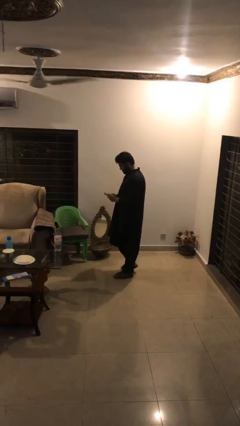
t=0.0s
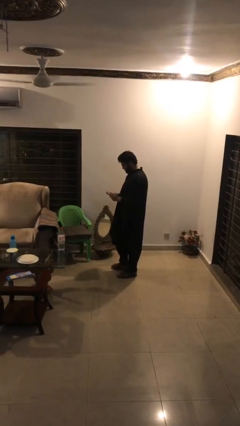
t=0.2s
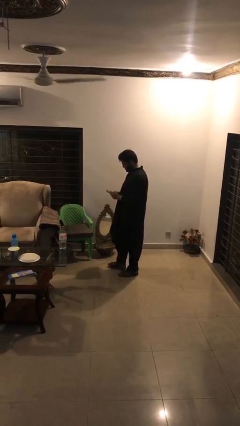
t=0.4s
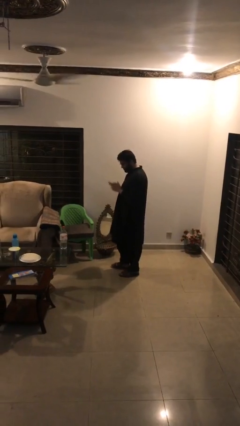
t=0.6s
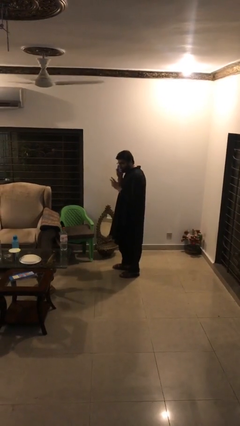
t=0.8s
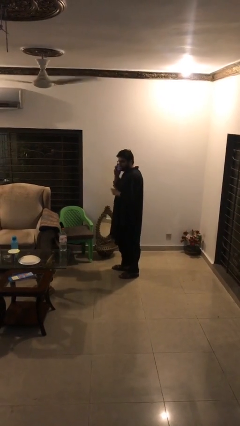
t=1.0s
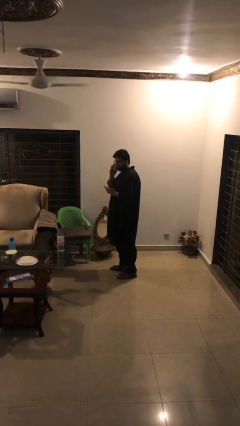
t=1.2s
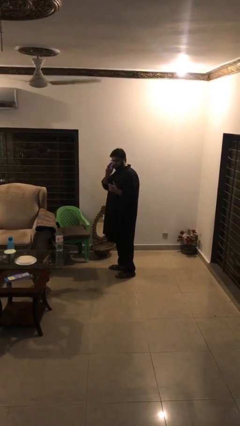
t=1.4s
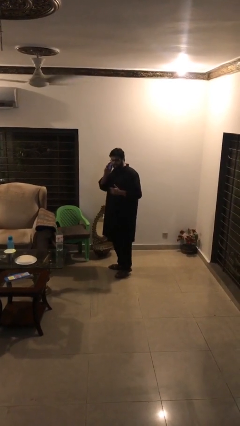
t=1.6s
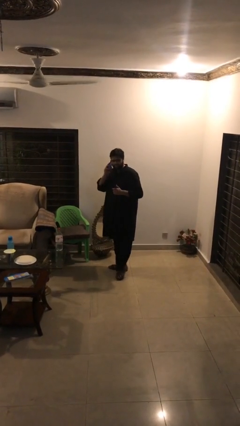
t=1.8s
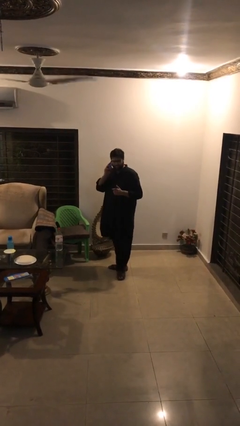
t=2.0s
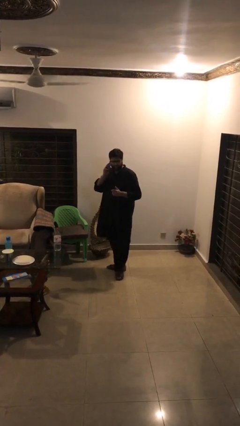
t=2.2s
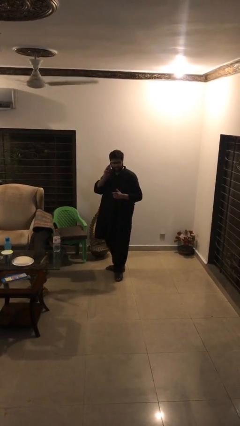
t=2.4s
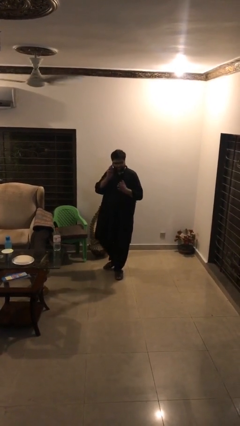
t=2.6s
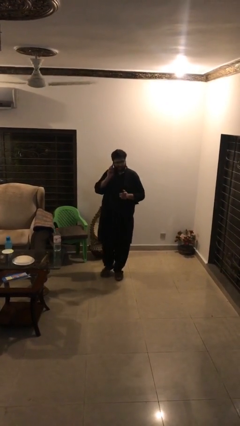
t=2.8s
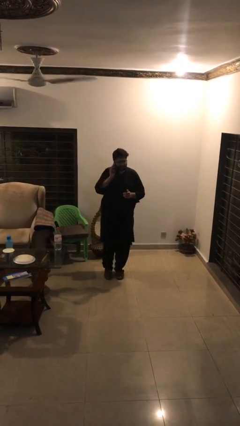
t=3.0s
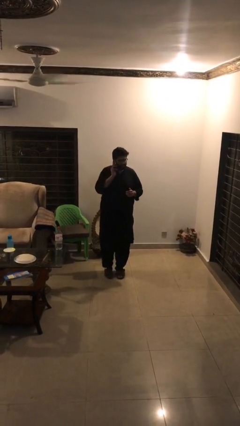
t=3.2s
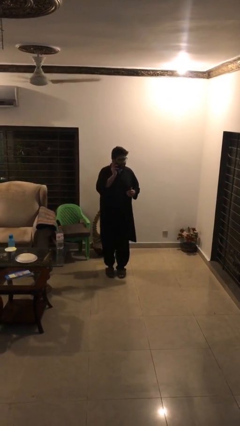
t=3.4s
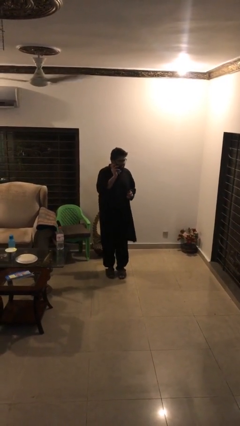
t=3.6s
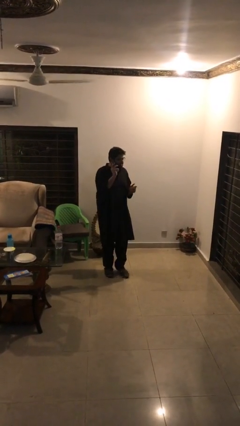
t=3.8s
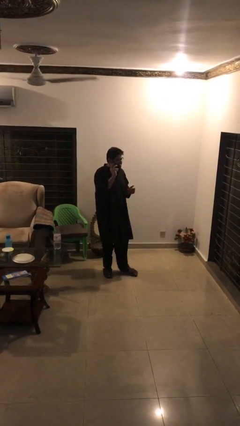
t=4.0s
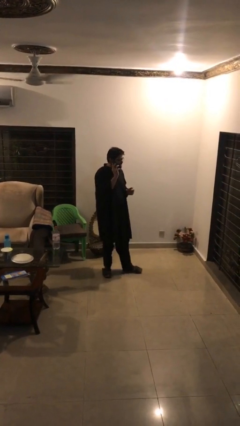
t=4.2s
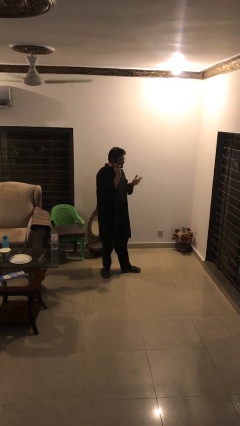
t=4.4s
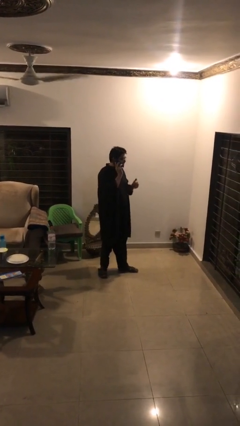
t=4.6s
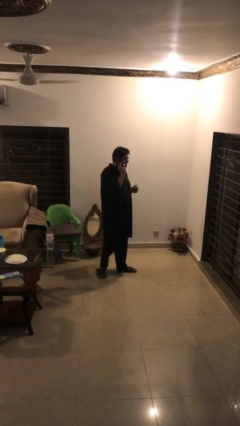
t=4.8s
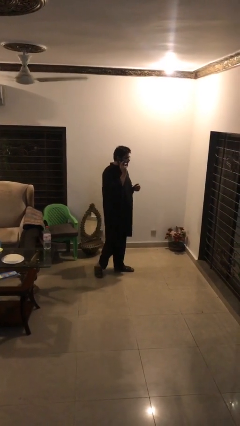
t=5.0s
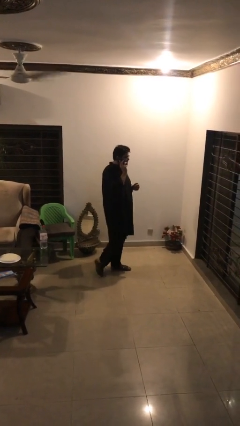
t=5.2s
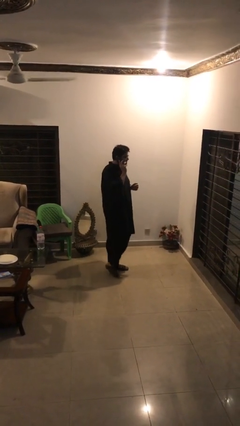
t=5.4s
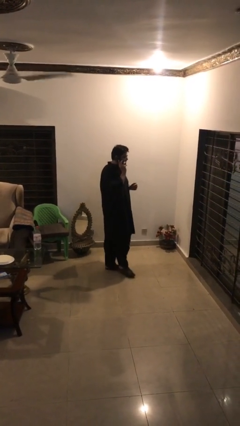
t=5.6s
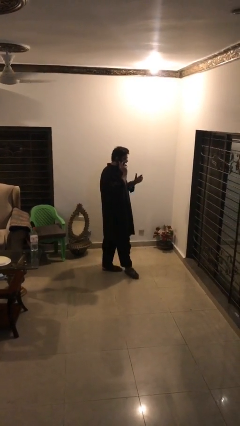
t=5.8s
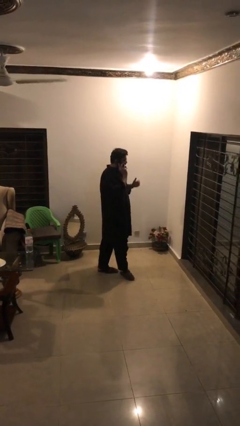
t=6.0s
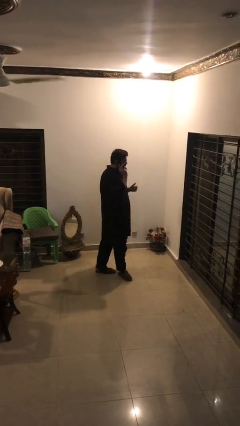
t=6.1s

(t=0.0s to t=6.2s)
person talks on phone

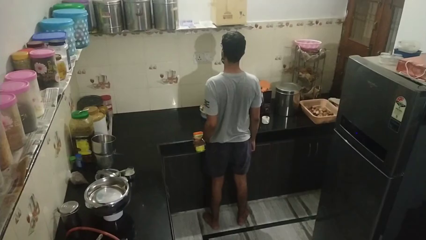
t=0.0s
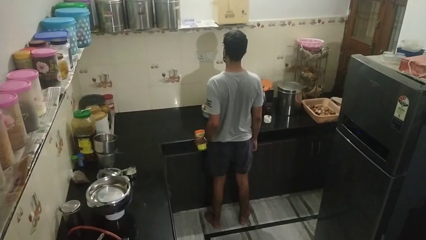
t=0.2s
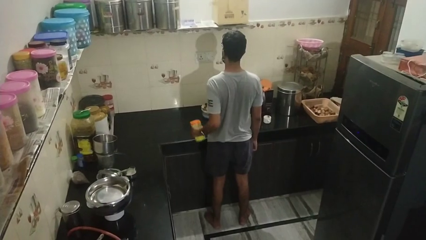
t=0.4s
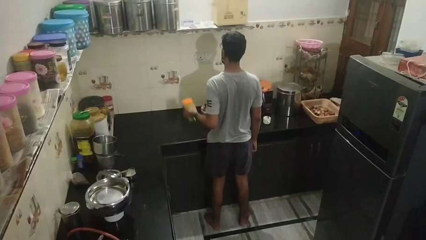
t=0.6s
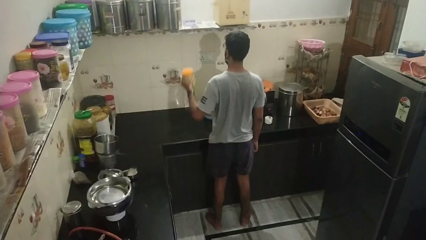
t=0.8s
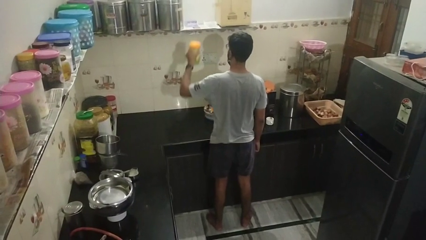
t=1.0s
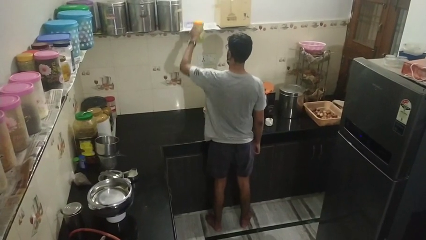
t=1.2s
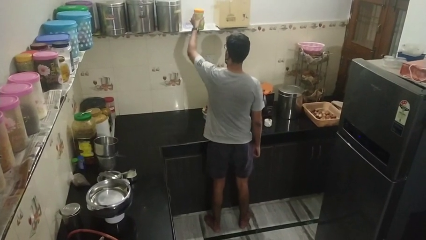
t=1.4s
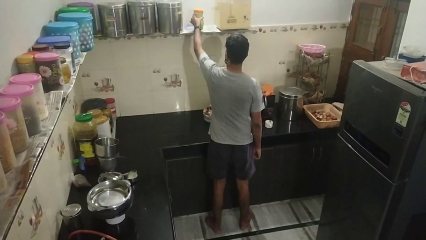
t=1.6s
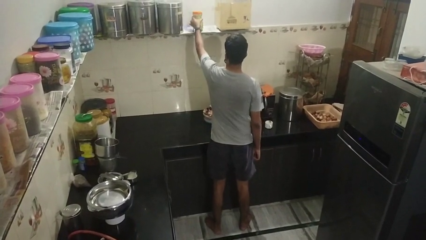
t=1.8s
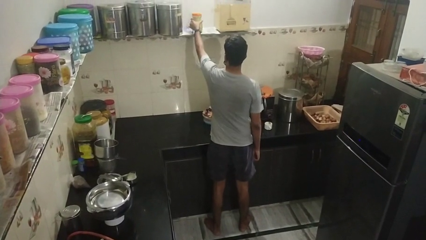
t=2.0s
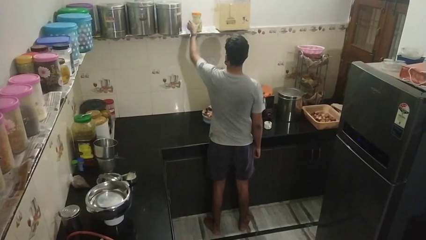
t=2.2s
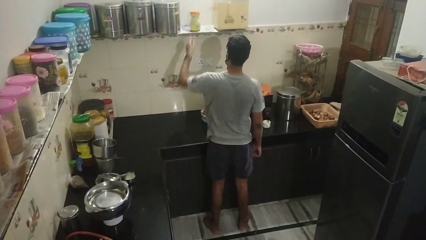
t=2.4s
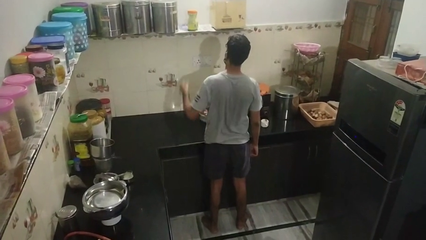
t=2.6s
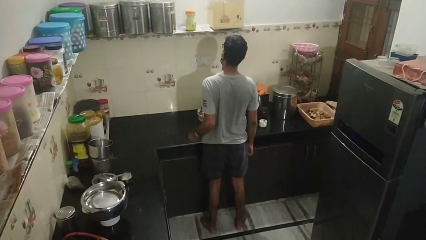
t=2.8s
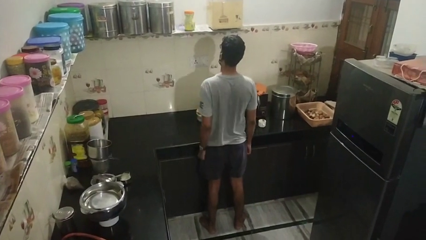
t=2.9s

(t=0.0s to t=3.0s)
person puts down object on shelf

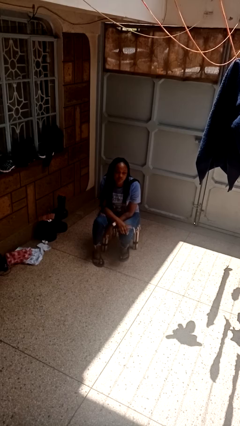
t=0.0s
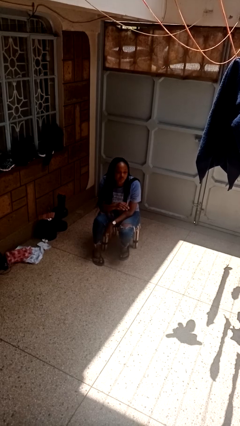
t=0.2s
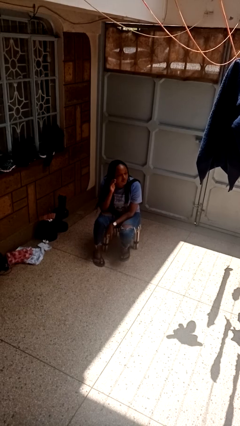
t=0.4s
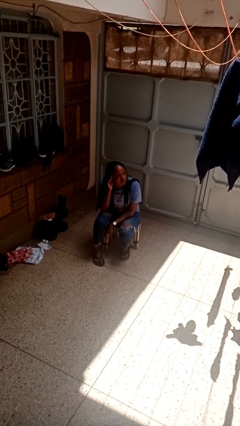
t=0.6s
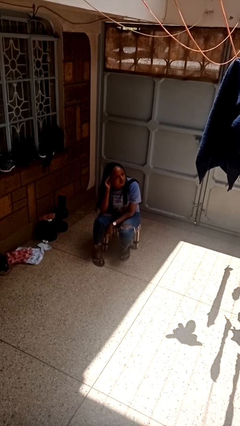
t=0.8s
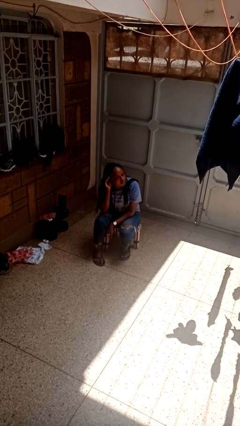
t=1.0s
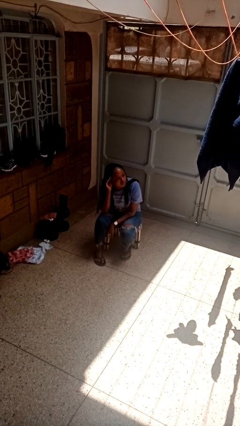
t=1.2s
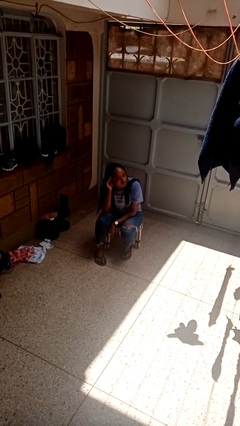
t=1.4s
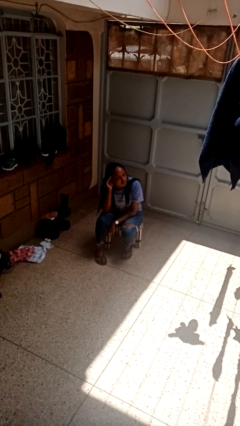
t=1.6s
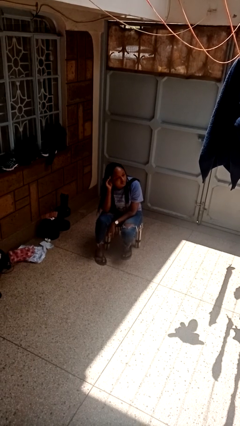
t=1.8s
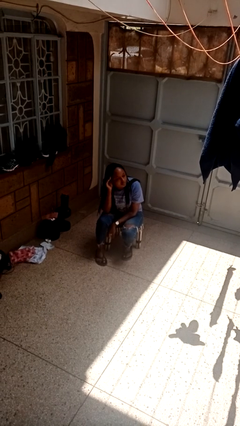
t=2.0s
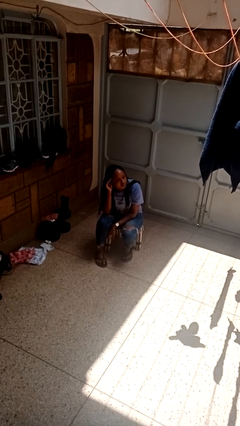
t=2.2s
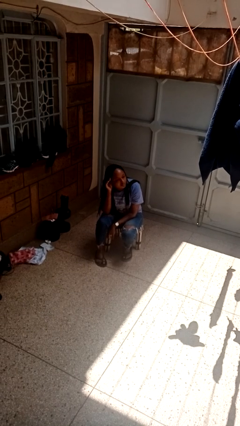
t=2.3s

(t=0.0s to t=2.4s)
person gestures listen closely

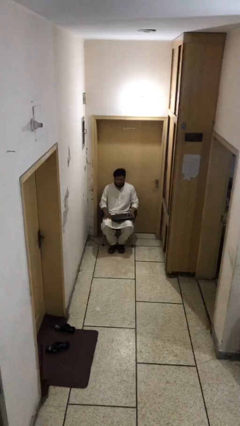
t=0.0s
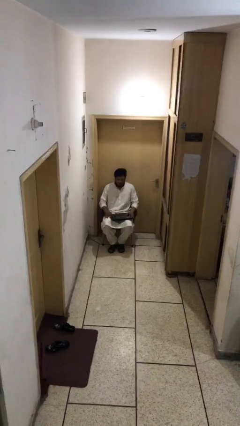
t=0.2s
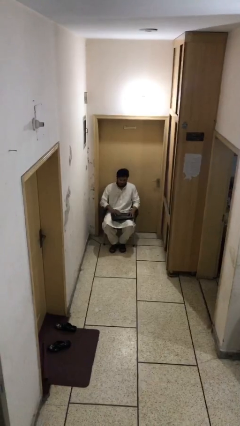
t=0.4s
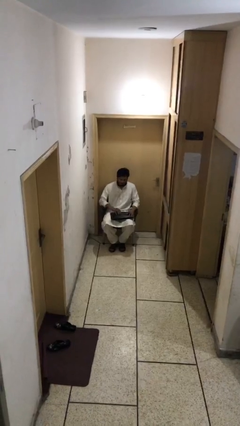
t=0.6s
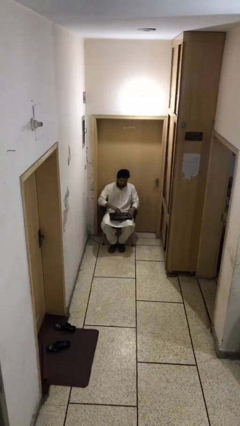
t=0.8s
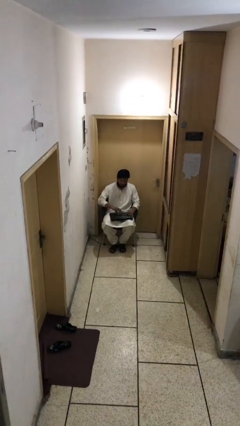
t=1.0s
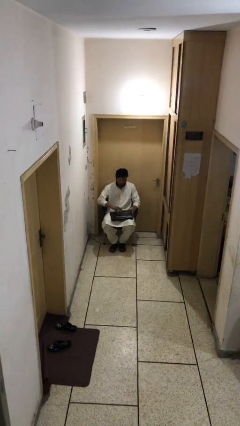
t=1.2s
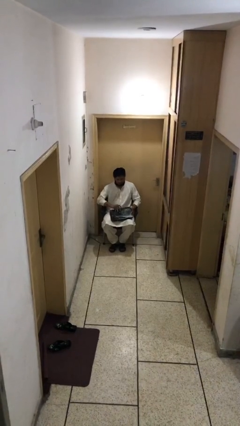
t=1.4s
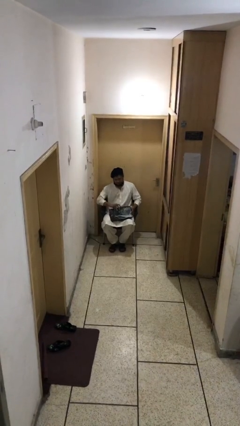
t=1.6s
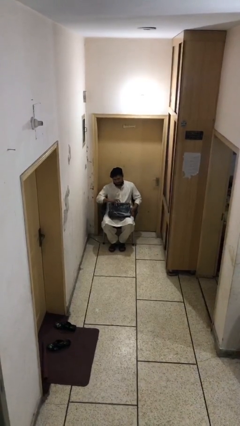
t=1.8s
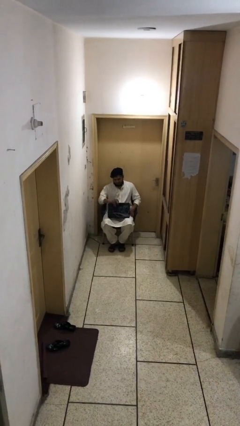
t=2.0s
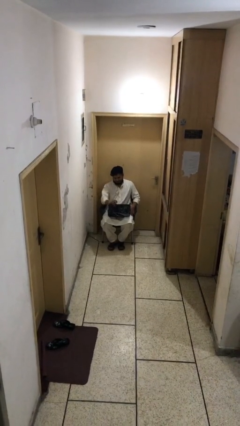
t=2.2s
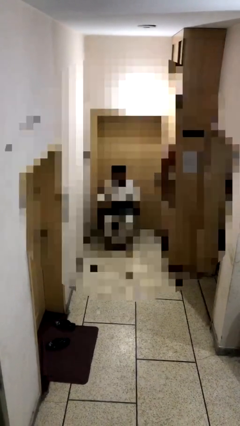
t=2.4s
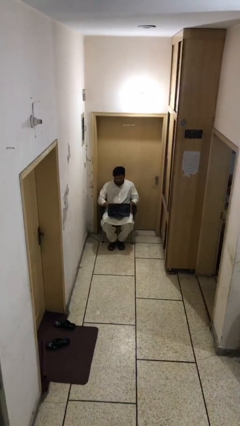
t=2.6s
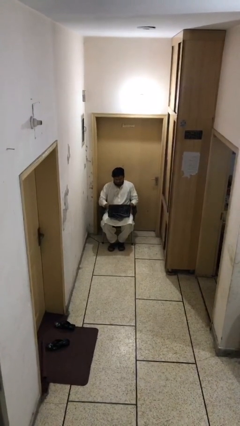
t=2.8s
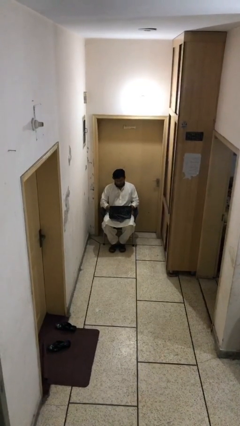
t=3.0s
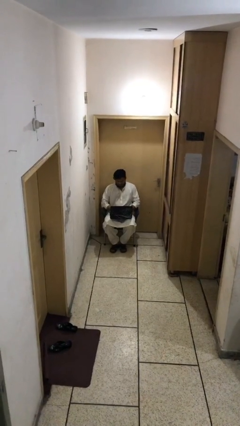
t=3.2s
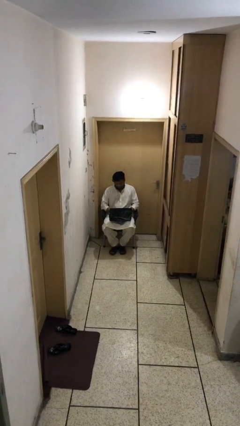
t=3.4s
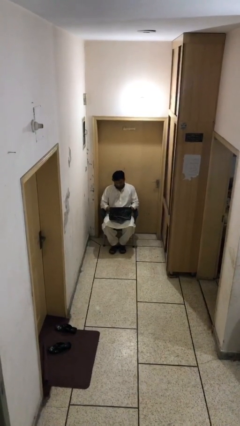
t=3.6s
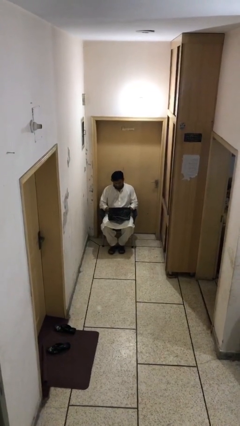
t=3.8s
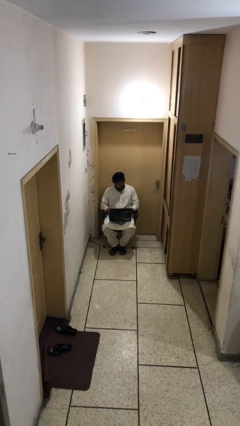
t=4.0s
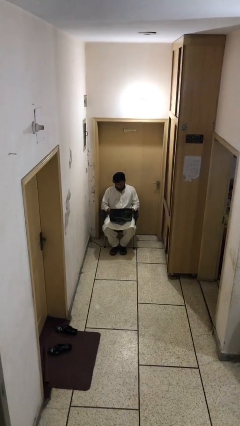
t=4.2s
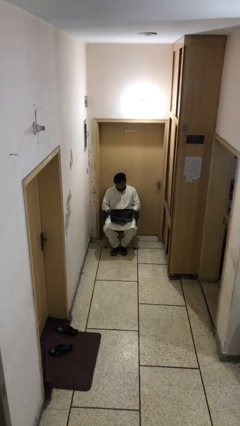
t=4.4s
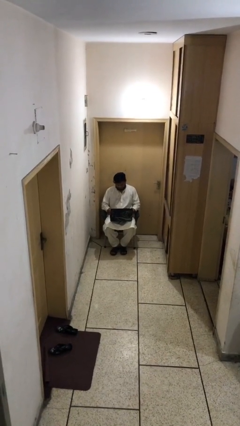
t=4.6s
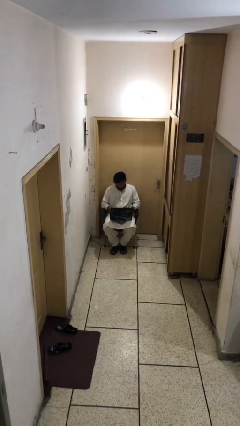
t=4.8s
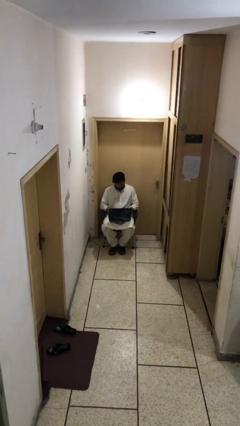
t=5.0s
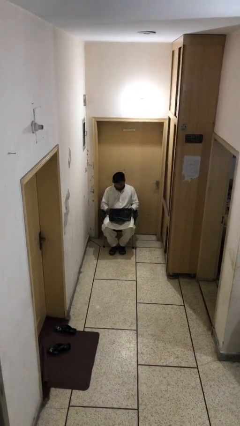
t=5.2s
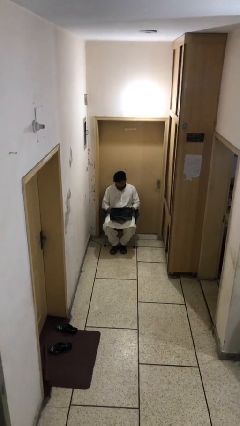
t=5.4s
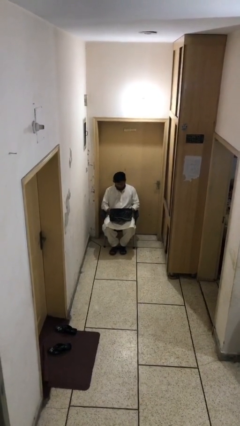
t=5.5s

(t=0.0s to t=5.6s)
person interacts with laptop

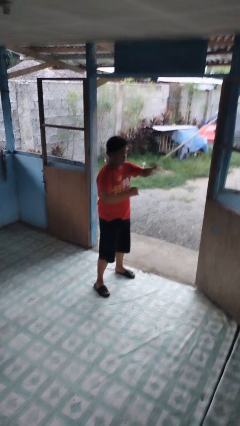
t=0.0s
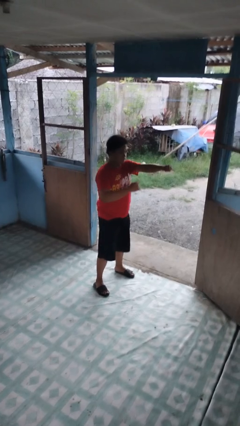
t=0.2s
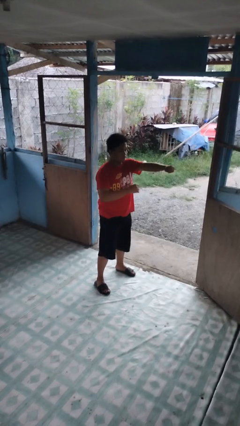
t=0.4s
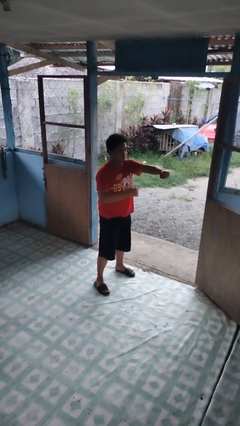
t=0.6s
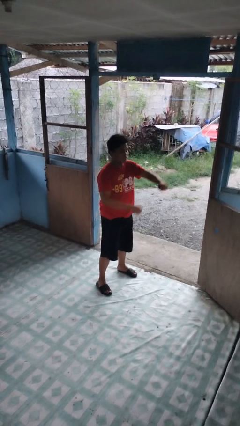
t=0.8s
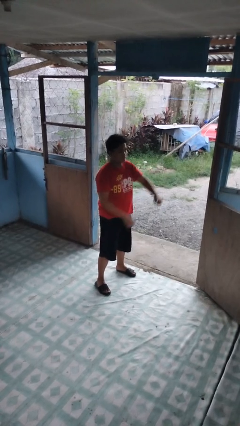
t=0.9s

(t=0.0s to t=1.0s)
person punches
